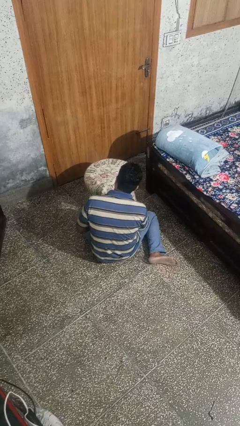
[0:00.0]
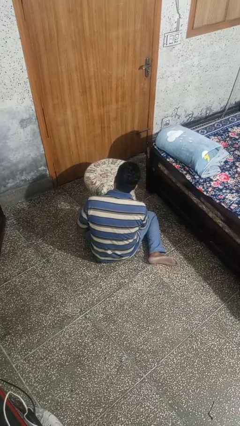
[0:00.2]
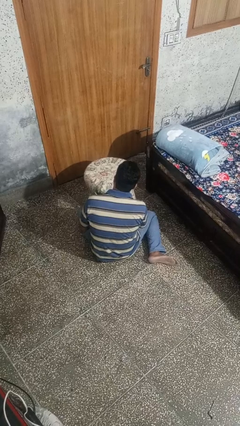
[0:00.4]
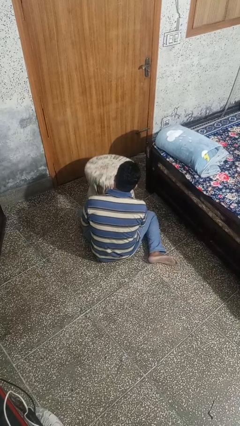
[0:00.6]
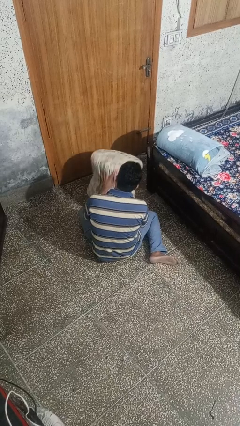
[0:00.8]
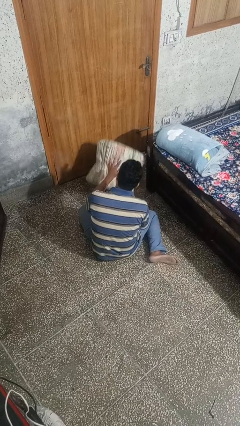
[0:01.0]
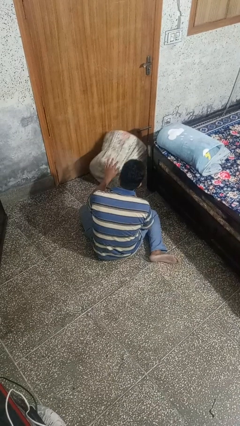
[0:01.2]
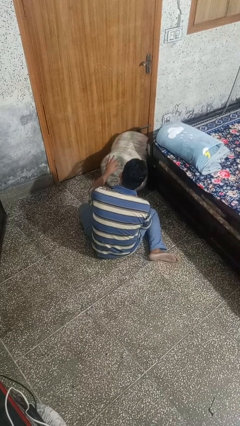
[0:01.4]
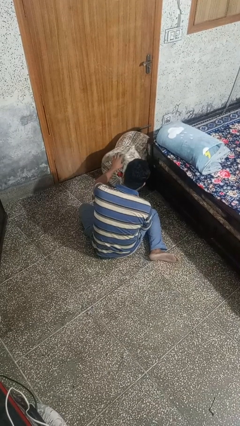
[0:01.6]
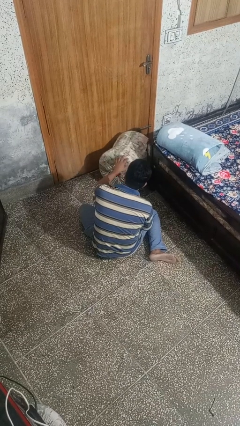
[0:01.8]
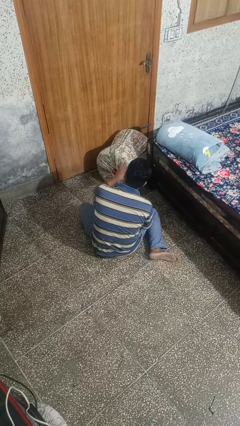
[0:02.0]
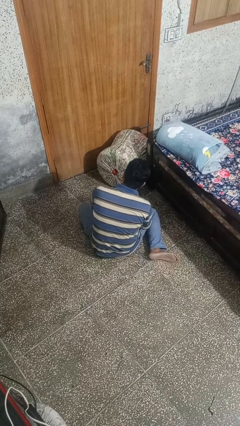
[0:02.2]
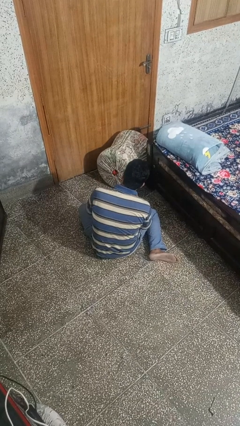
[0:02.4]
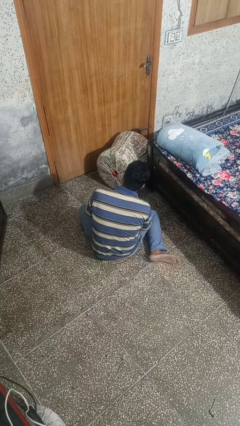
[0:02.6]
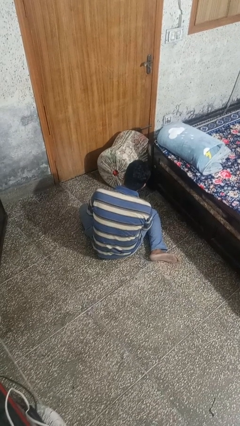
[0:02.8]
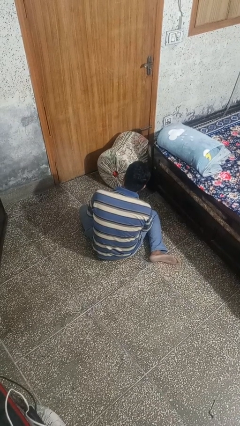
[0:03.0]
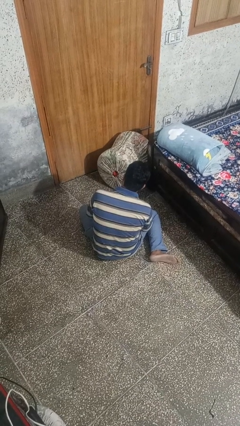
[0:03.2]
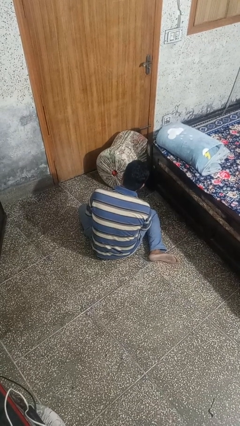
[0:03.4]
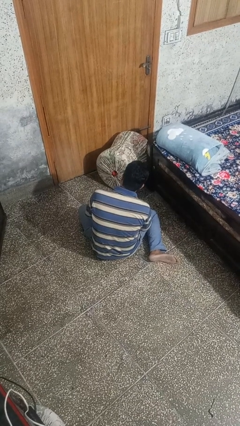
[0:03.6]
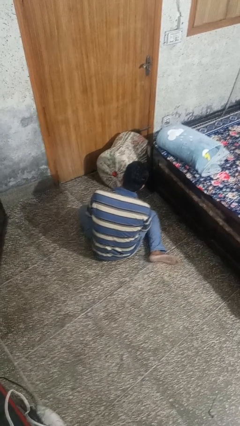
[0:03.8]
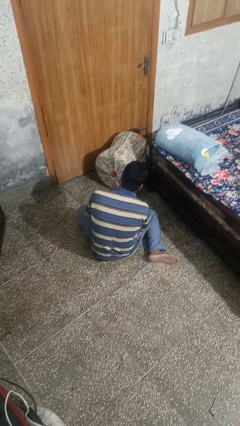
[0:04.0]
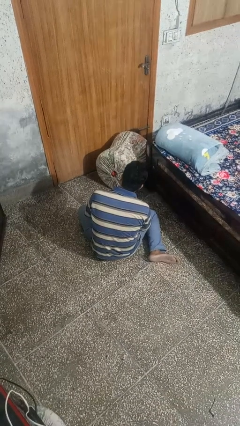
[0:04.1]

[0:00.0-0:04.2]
person knocks over furniture

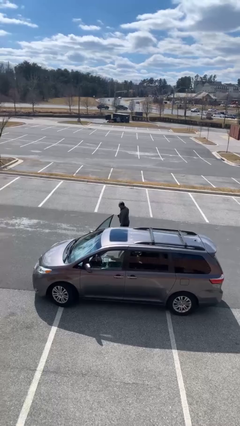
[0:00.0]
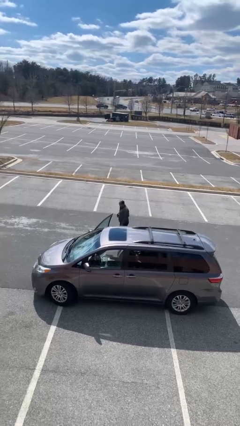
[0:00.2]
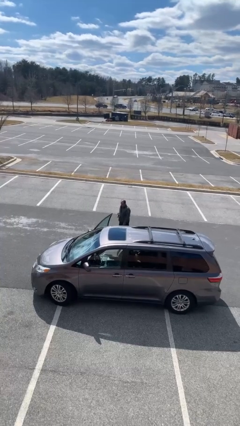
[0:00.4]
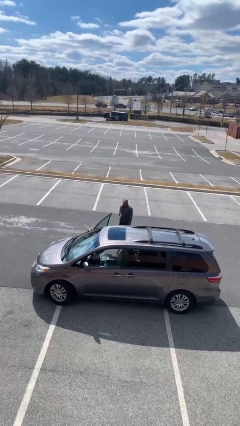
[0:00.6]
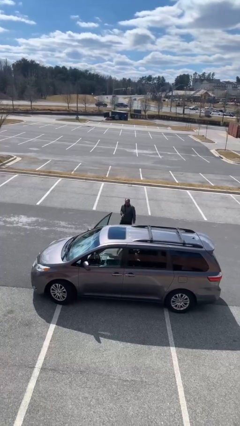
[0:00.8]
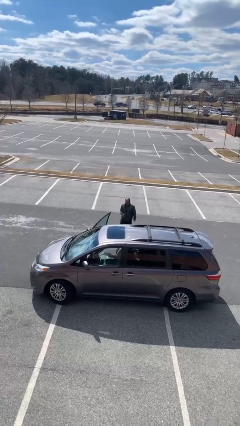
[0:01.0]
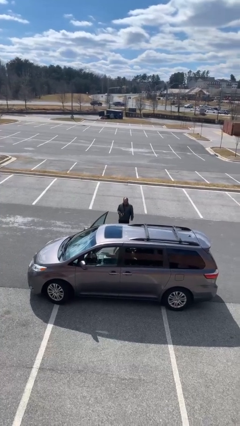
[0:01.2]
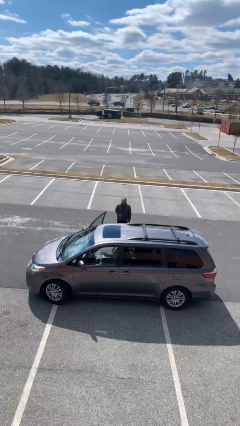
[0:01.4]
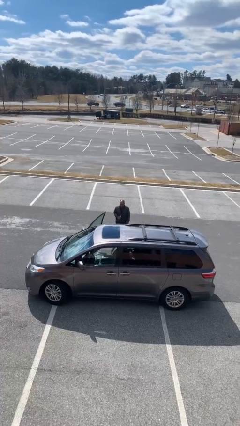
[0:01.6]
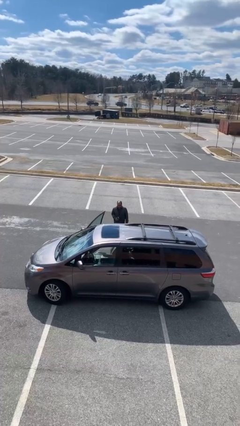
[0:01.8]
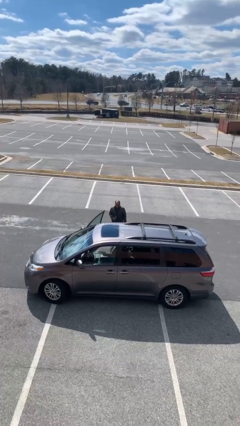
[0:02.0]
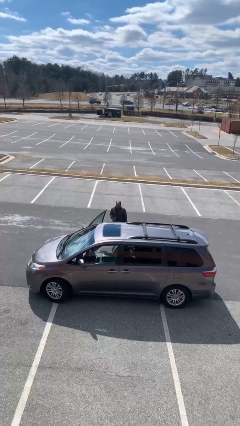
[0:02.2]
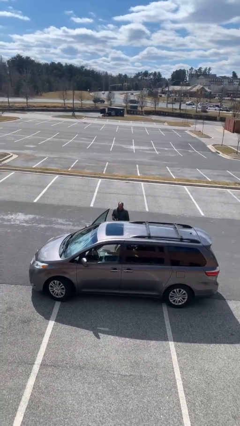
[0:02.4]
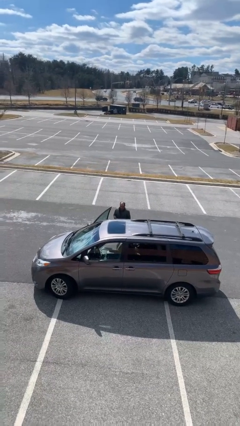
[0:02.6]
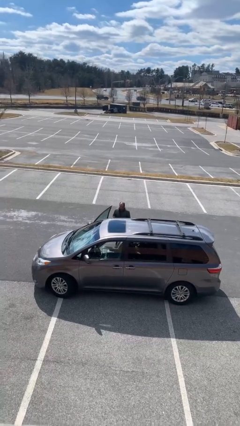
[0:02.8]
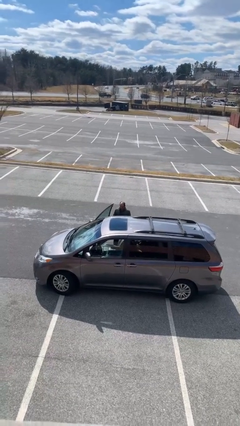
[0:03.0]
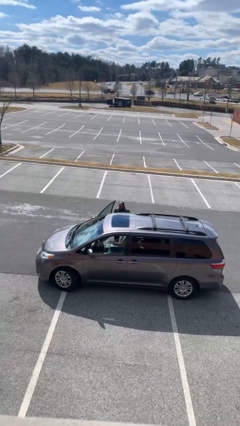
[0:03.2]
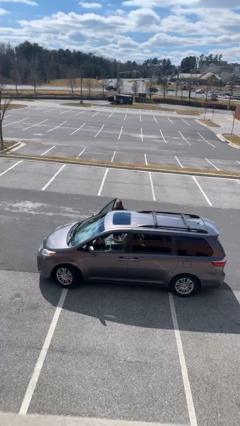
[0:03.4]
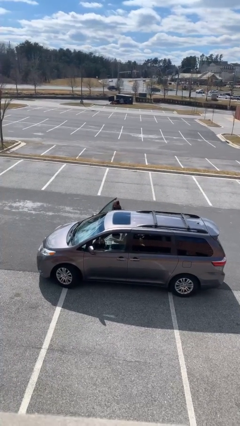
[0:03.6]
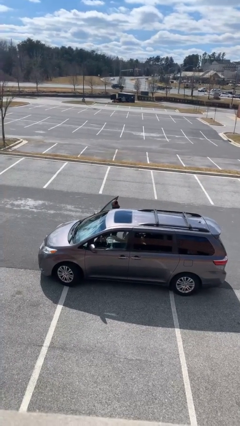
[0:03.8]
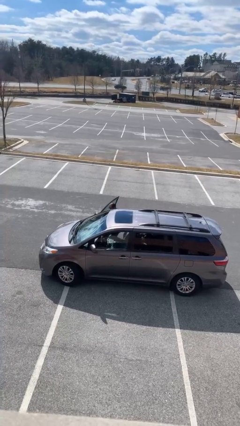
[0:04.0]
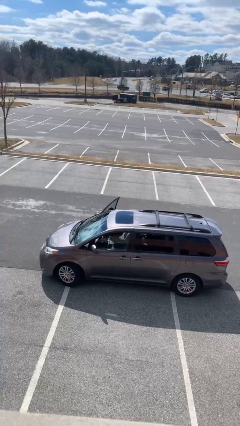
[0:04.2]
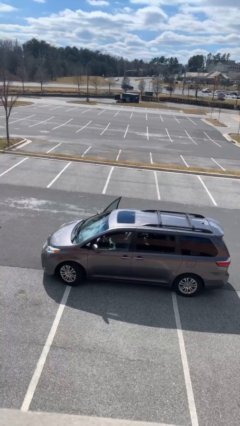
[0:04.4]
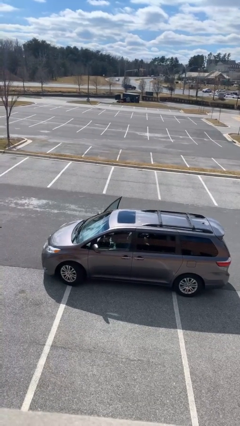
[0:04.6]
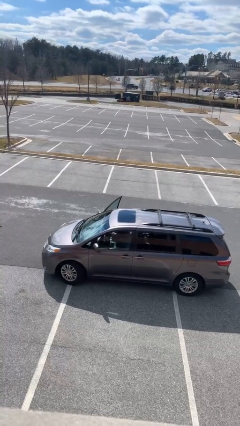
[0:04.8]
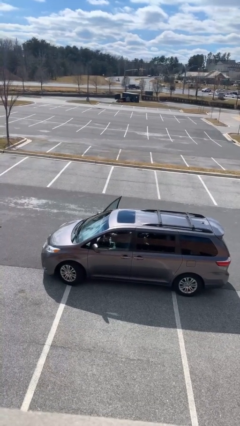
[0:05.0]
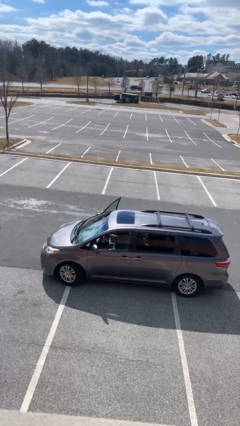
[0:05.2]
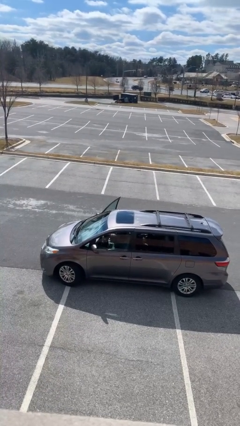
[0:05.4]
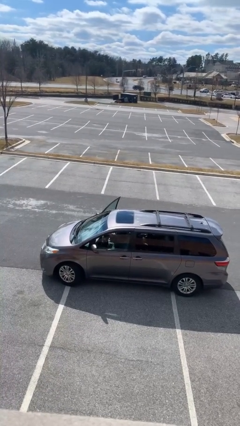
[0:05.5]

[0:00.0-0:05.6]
person enters car

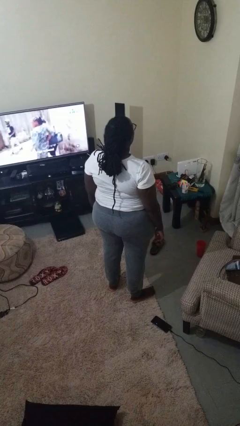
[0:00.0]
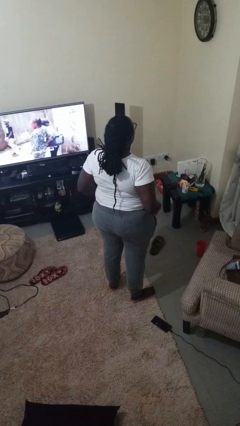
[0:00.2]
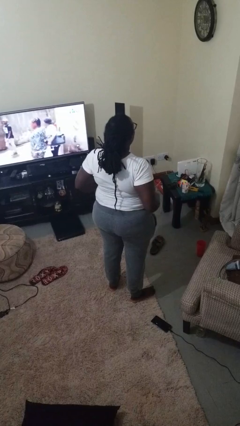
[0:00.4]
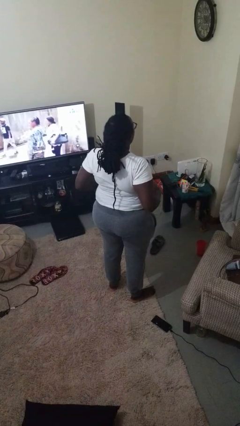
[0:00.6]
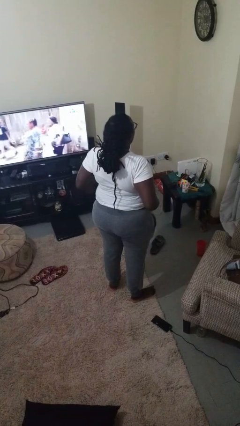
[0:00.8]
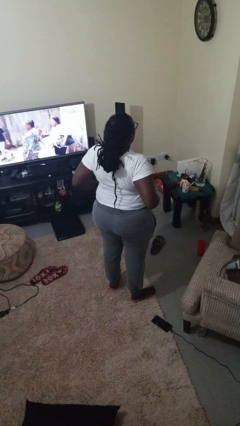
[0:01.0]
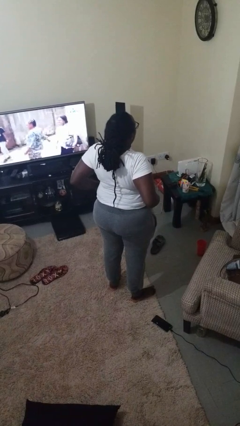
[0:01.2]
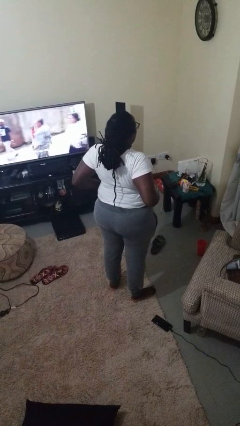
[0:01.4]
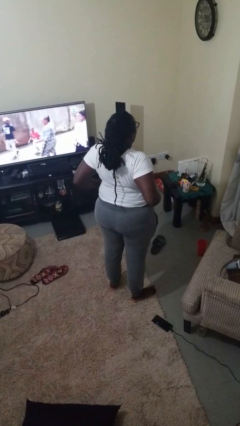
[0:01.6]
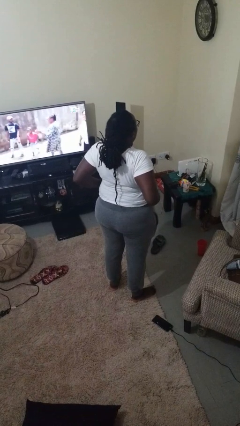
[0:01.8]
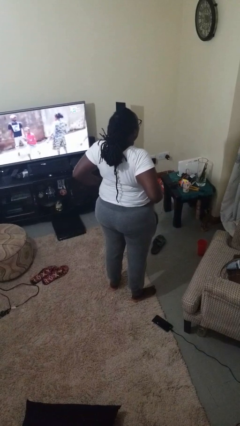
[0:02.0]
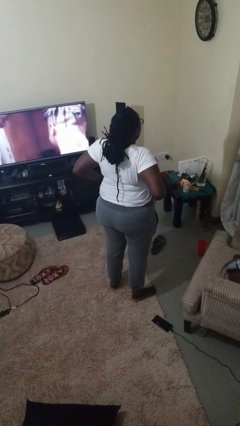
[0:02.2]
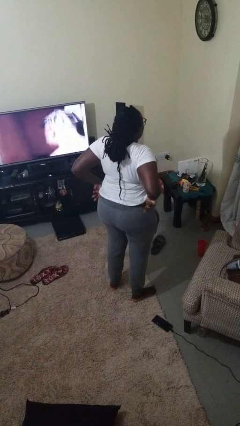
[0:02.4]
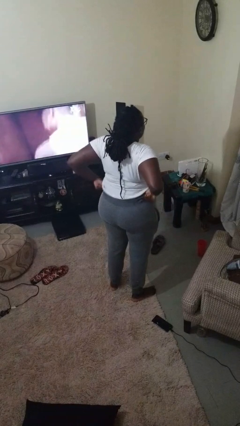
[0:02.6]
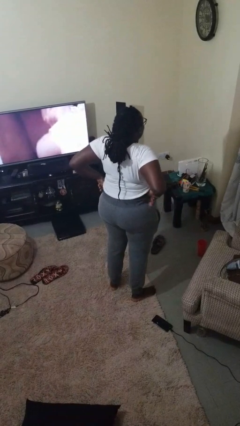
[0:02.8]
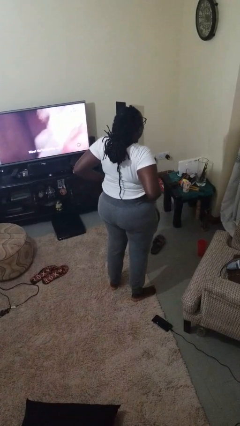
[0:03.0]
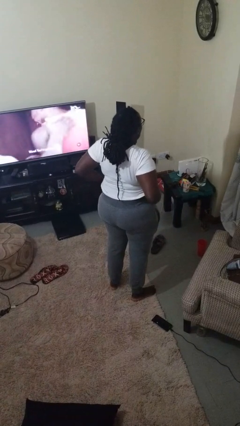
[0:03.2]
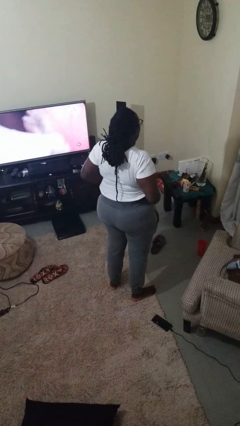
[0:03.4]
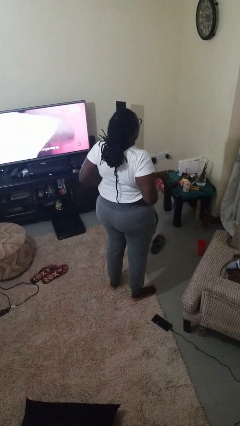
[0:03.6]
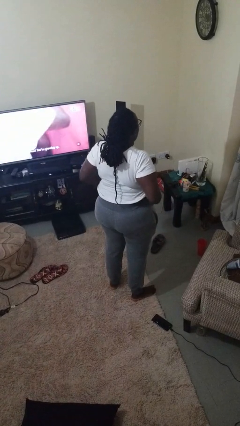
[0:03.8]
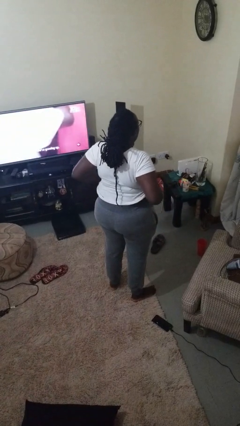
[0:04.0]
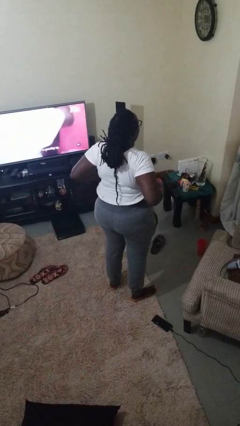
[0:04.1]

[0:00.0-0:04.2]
person hikes up pants

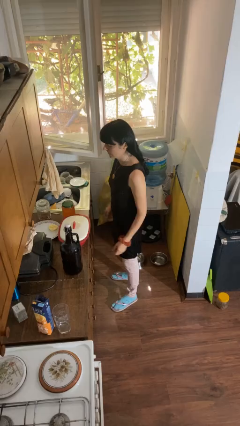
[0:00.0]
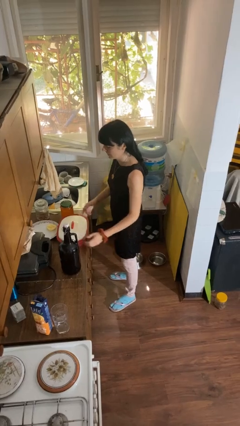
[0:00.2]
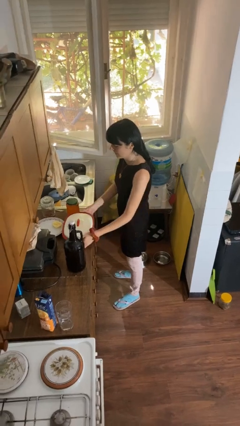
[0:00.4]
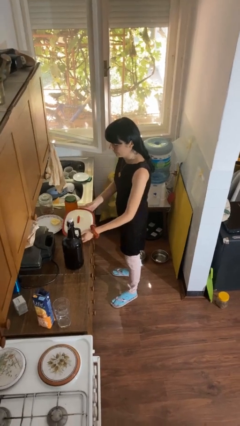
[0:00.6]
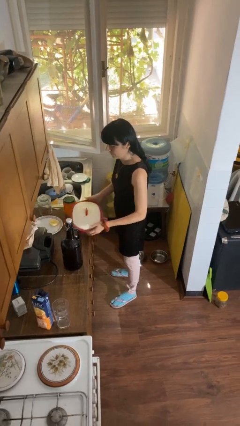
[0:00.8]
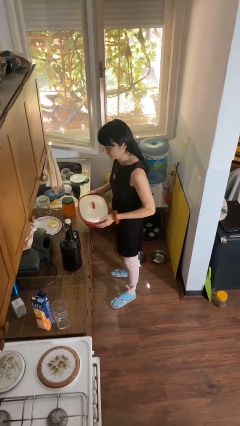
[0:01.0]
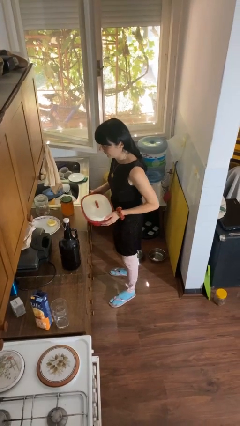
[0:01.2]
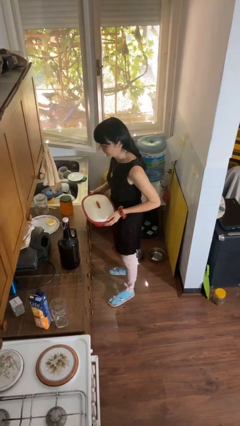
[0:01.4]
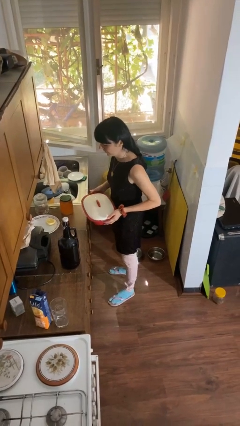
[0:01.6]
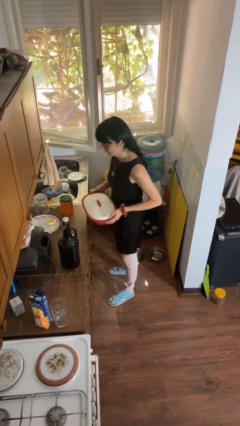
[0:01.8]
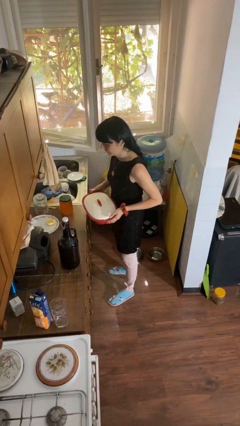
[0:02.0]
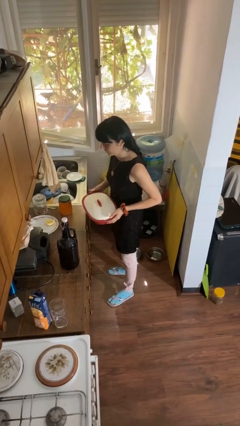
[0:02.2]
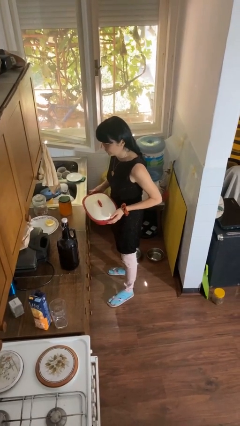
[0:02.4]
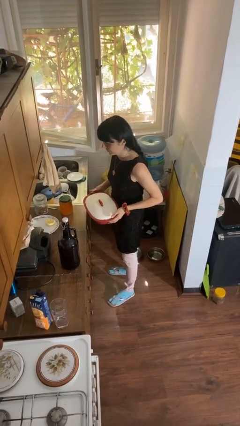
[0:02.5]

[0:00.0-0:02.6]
person picks up object from countertop

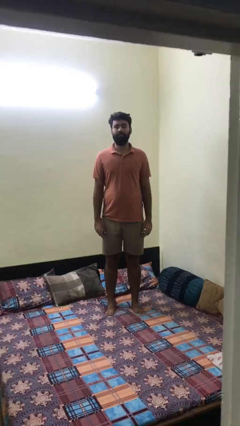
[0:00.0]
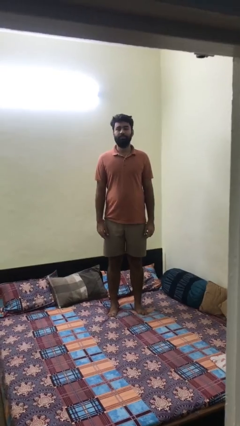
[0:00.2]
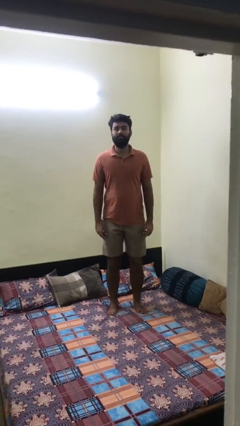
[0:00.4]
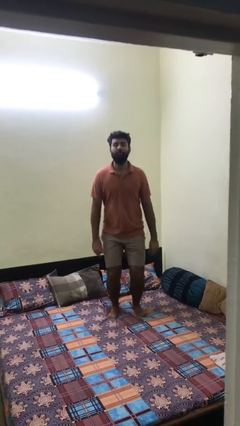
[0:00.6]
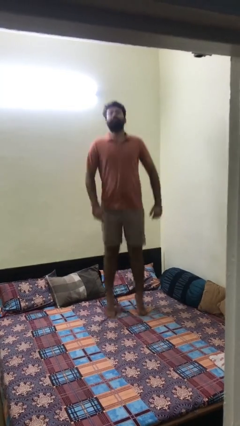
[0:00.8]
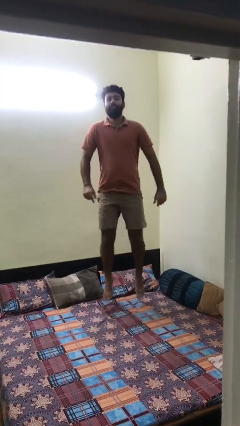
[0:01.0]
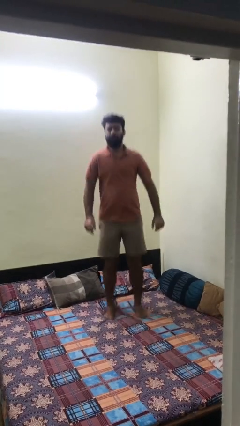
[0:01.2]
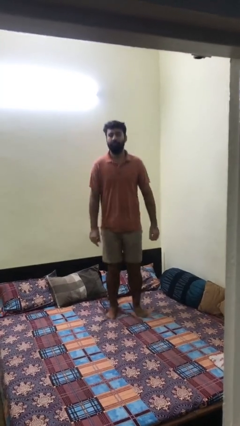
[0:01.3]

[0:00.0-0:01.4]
person jumps on bed
